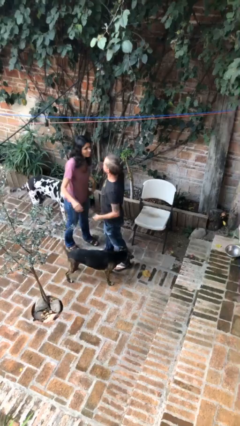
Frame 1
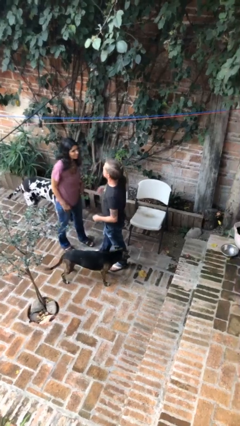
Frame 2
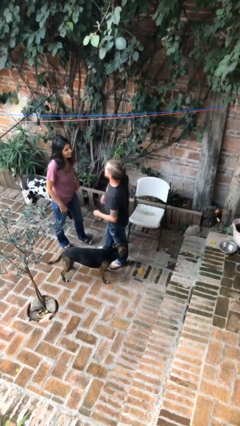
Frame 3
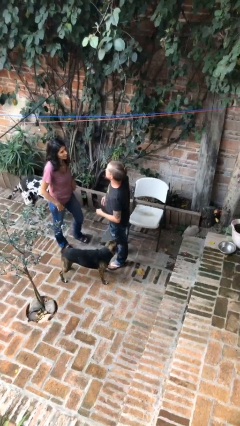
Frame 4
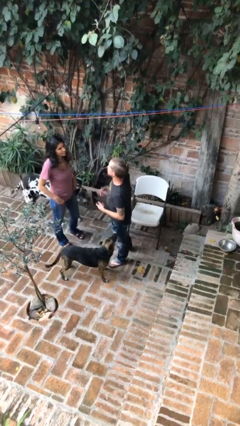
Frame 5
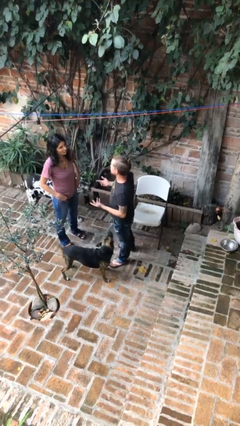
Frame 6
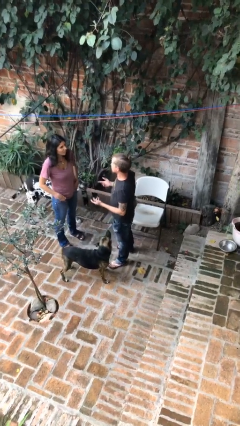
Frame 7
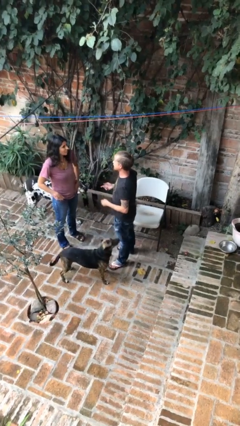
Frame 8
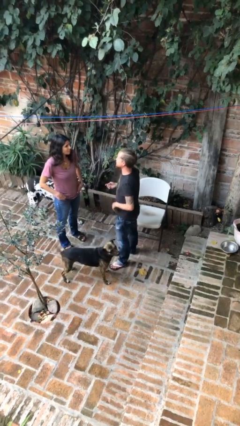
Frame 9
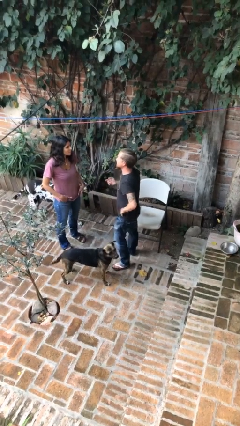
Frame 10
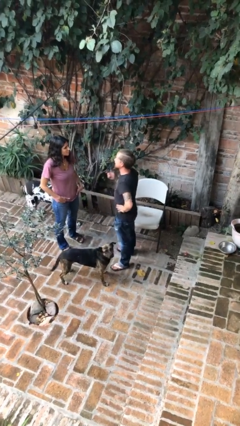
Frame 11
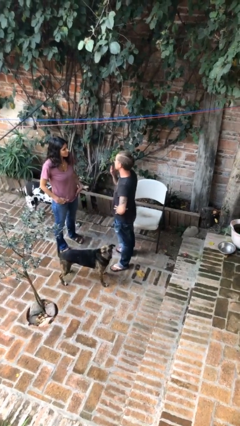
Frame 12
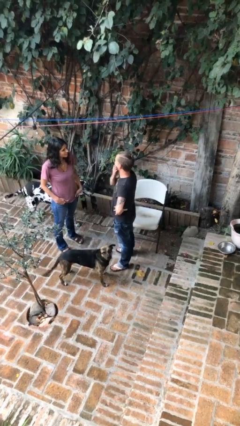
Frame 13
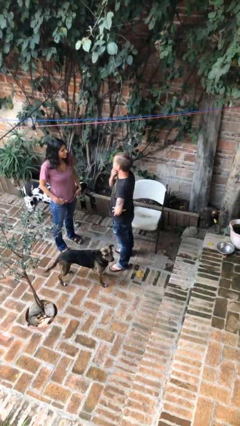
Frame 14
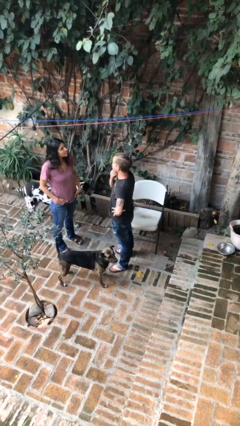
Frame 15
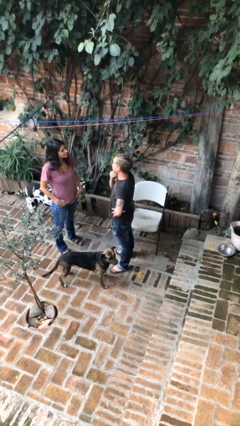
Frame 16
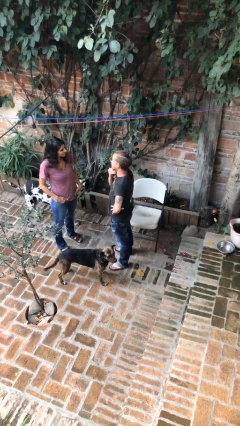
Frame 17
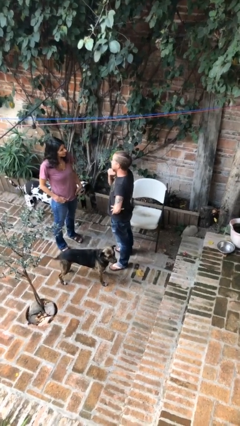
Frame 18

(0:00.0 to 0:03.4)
person talks to person

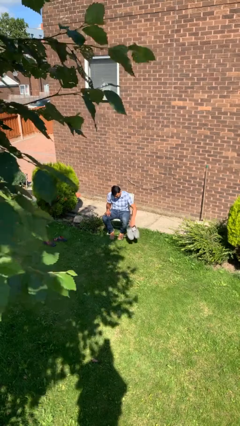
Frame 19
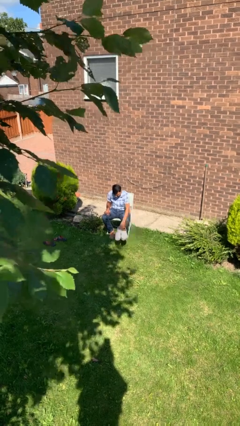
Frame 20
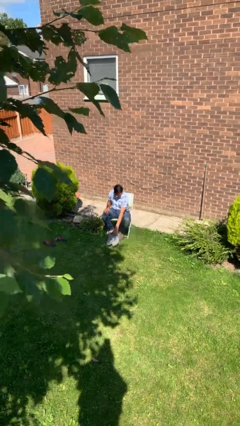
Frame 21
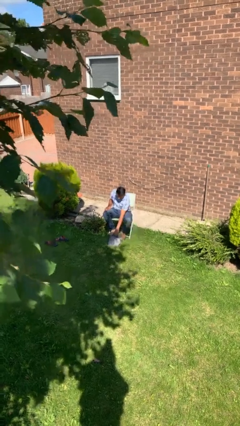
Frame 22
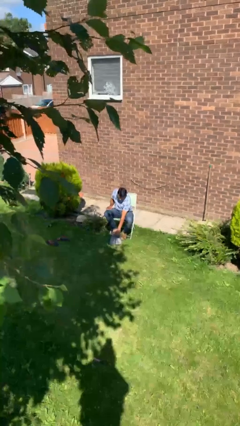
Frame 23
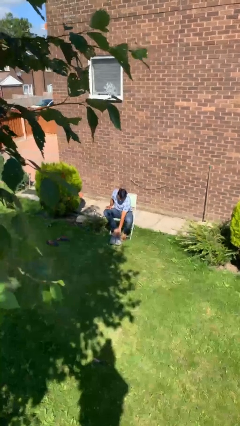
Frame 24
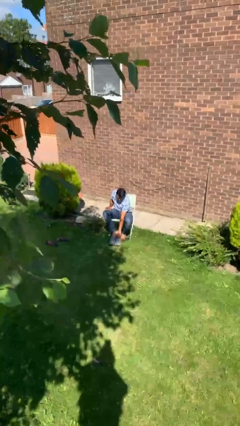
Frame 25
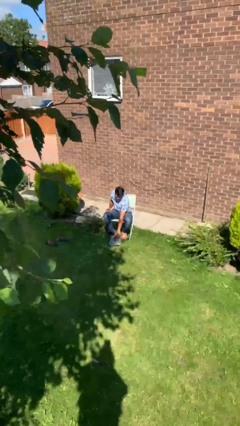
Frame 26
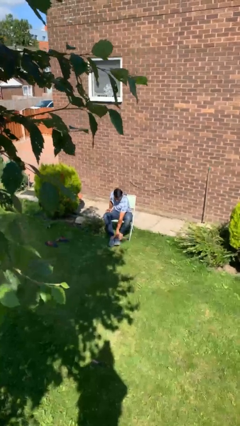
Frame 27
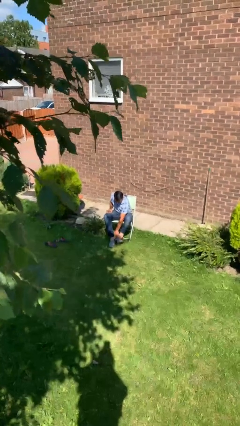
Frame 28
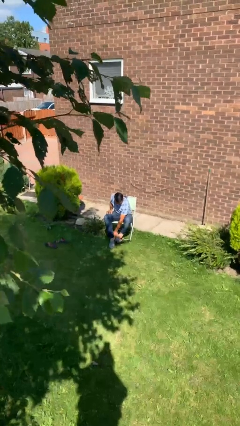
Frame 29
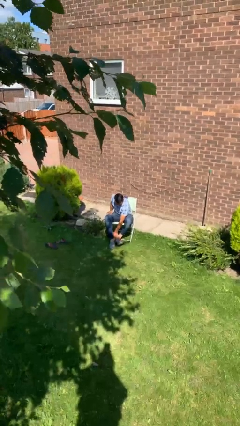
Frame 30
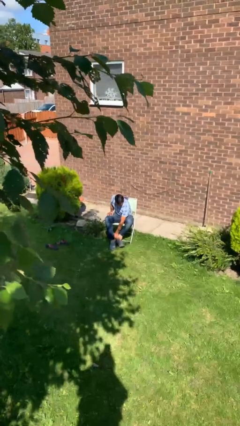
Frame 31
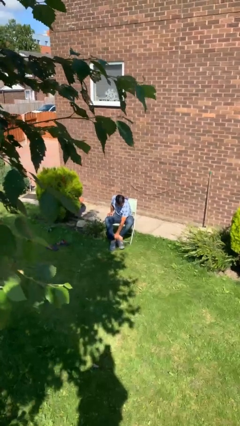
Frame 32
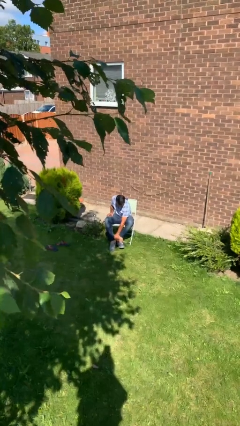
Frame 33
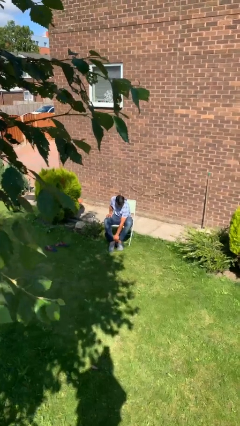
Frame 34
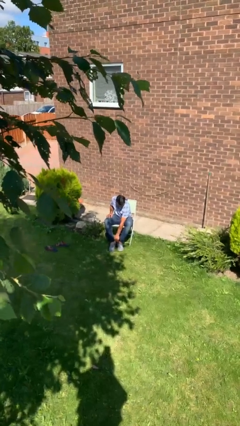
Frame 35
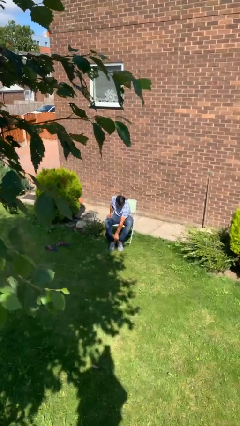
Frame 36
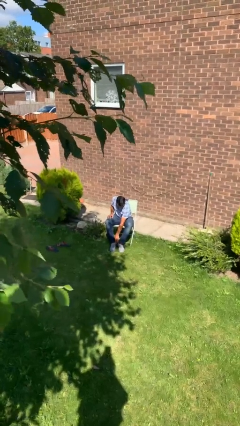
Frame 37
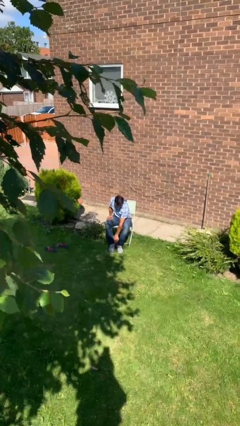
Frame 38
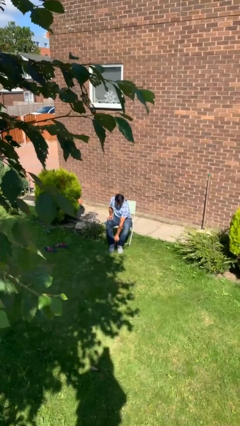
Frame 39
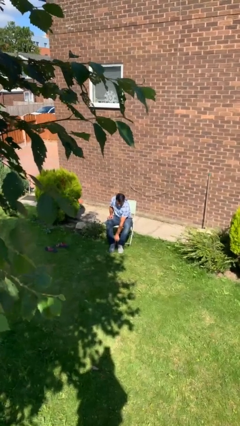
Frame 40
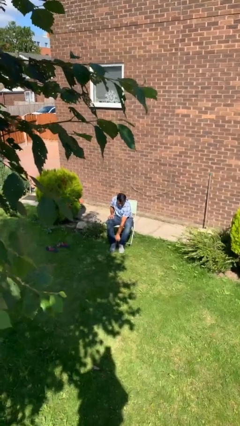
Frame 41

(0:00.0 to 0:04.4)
person puts on shoes

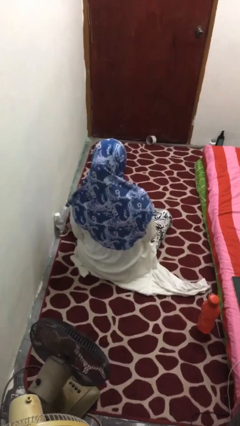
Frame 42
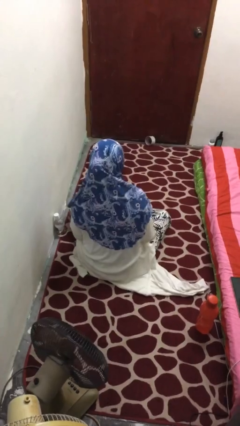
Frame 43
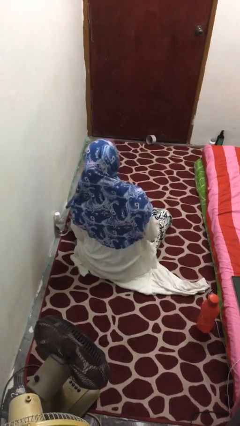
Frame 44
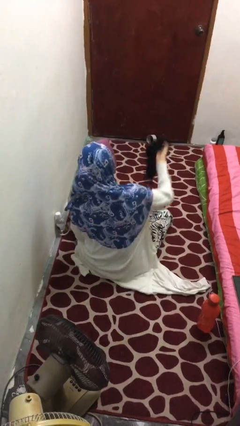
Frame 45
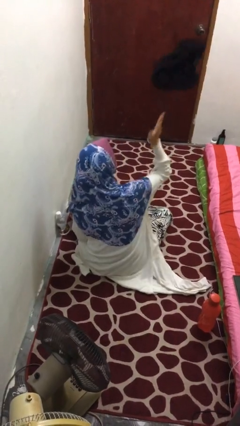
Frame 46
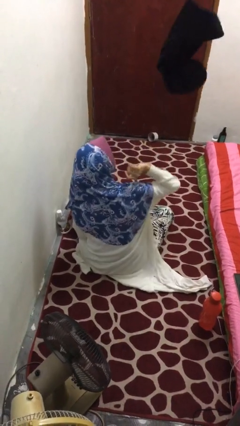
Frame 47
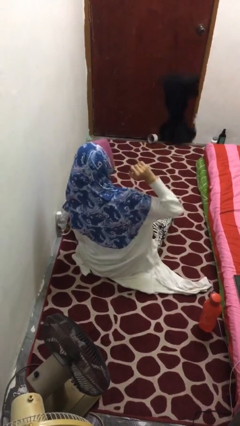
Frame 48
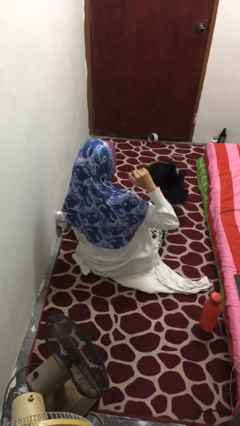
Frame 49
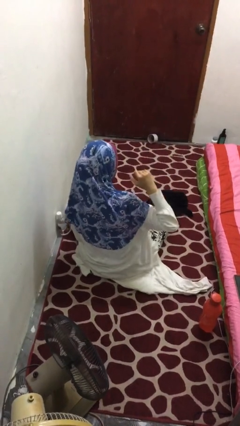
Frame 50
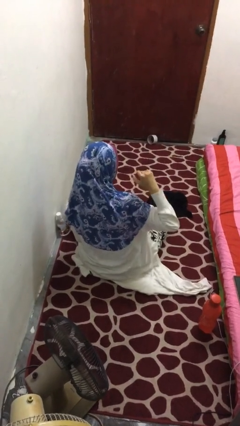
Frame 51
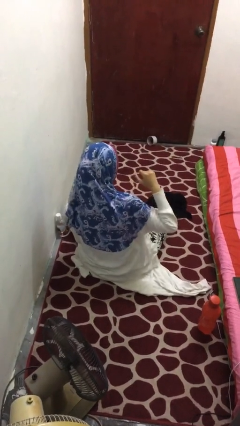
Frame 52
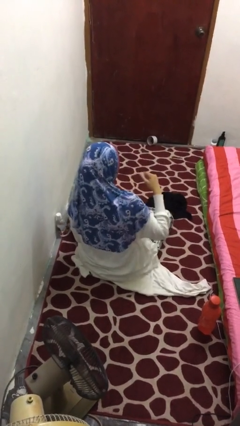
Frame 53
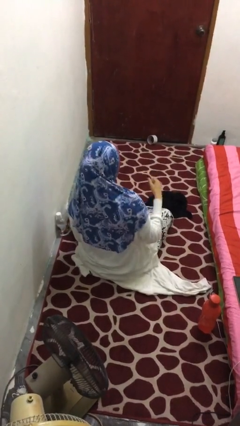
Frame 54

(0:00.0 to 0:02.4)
person throws object into air

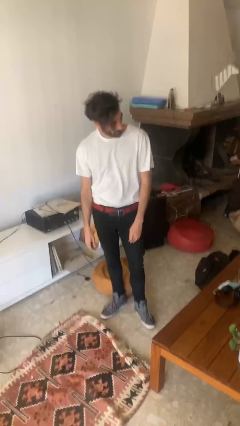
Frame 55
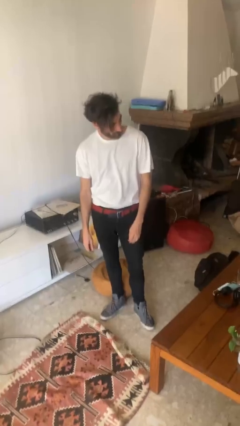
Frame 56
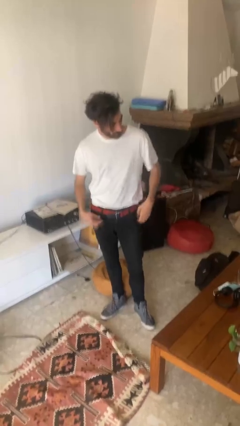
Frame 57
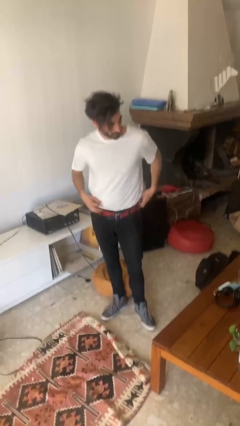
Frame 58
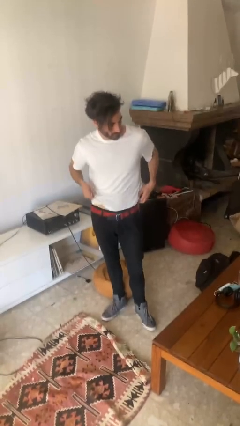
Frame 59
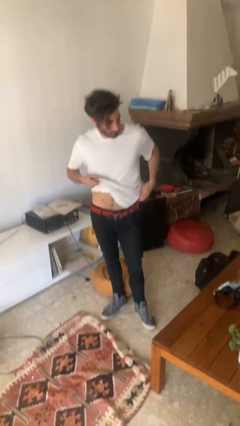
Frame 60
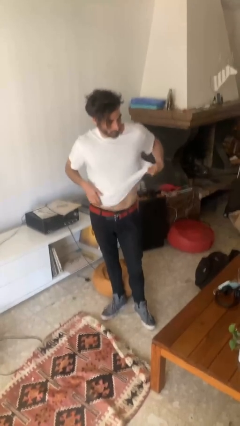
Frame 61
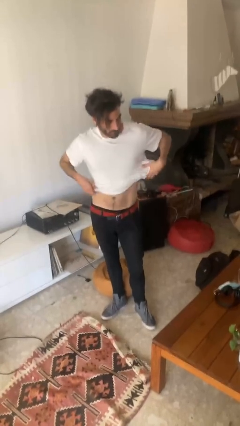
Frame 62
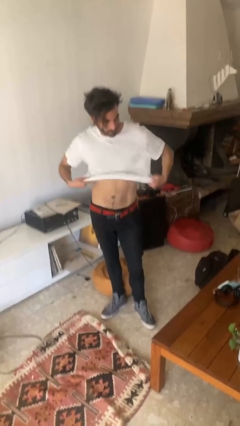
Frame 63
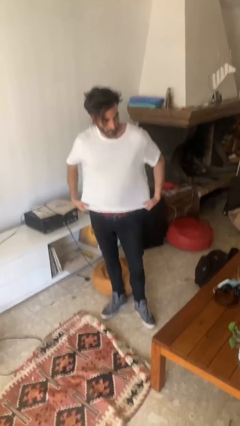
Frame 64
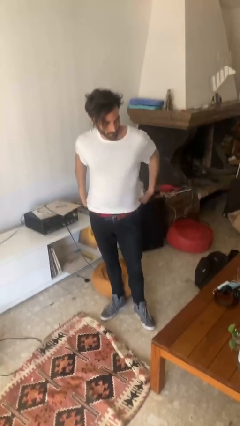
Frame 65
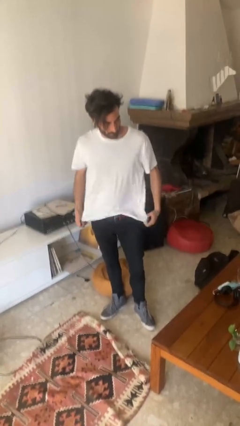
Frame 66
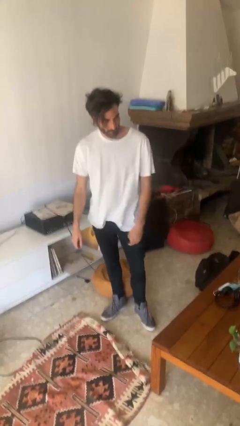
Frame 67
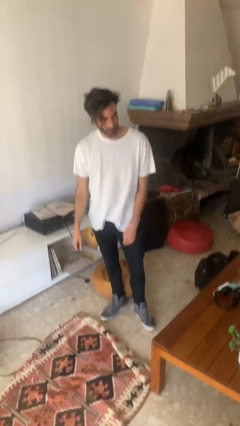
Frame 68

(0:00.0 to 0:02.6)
person untucks shirt

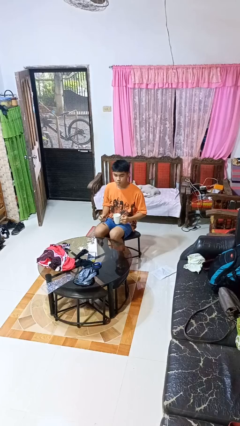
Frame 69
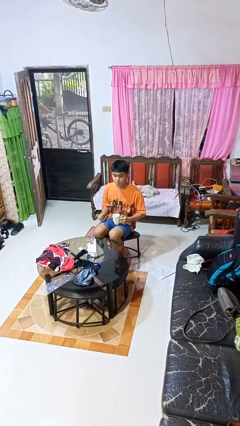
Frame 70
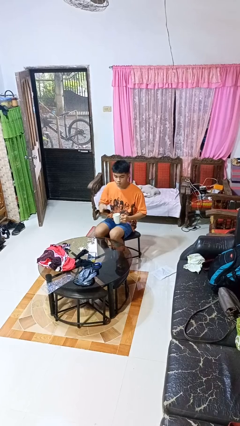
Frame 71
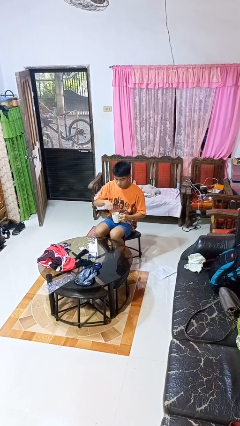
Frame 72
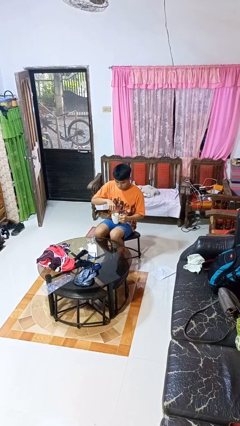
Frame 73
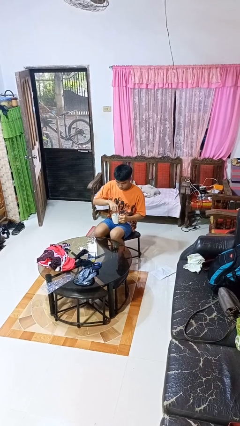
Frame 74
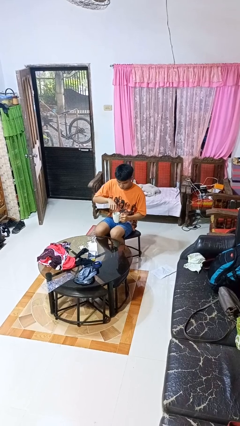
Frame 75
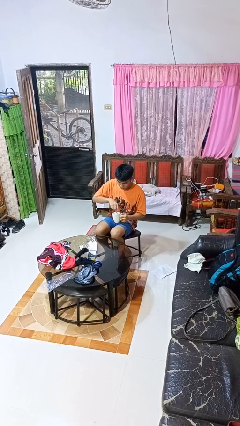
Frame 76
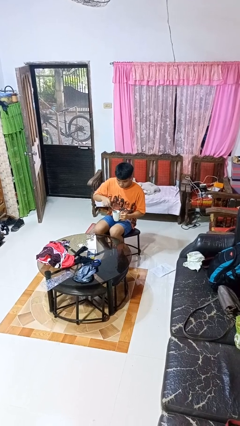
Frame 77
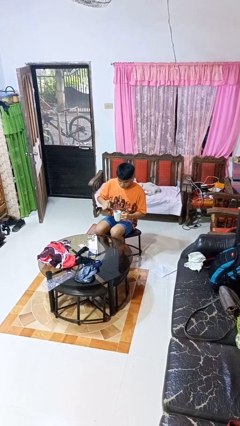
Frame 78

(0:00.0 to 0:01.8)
person stirs mug

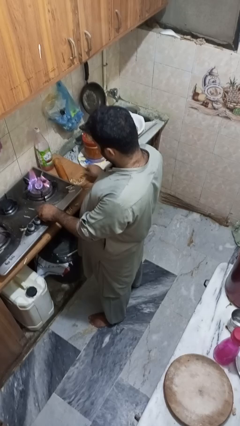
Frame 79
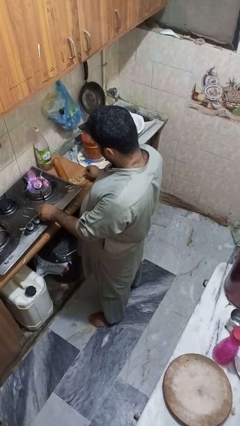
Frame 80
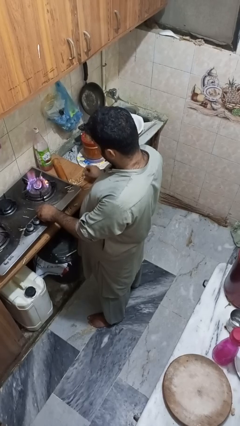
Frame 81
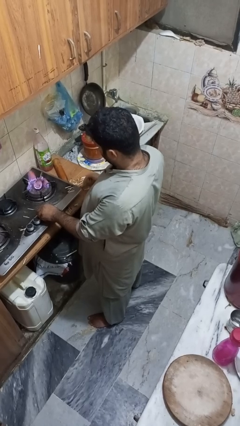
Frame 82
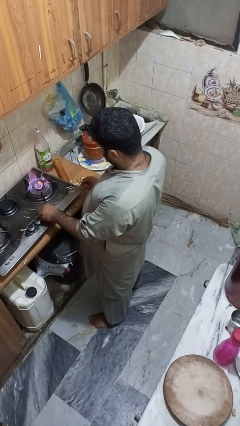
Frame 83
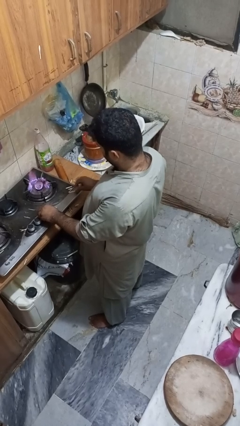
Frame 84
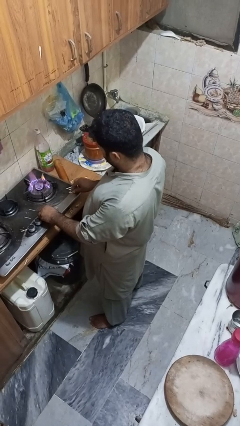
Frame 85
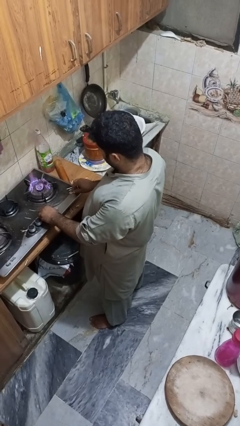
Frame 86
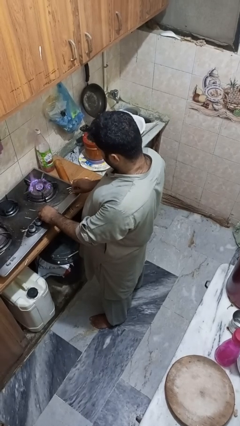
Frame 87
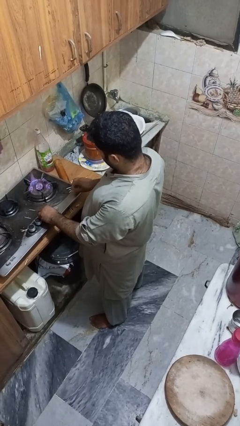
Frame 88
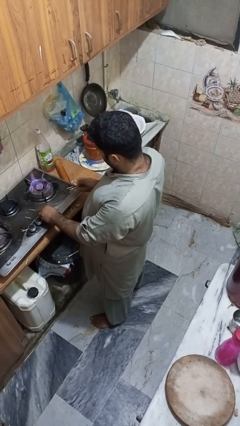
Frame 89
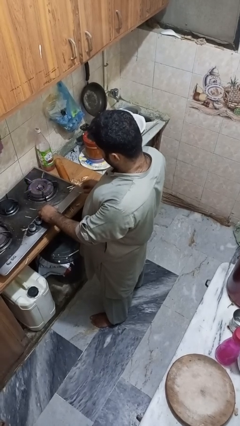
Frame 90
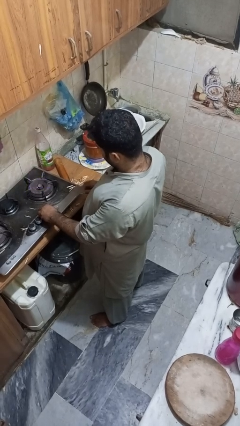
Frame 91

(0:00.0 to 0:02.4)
person turns off stovetop

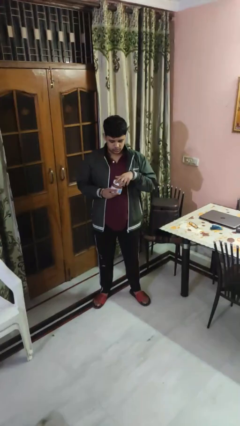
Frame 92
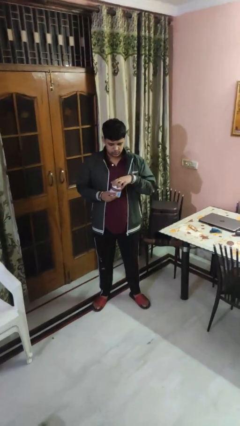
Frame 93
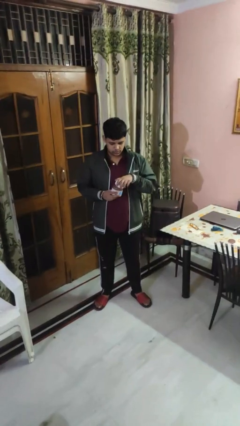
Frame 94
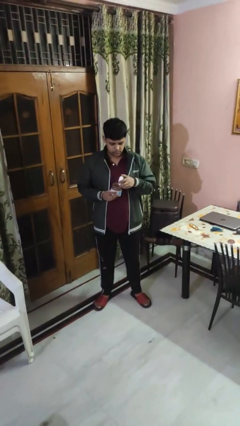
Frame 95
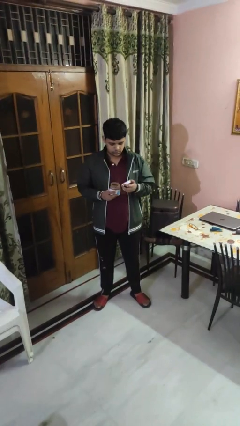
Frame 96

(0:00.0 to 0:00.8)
person opens jar
